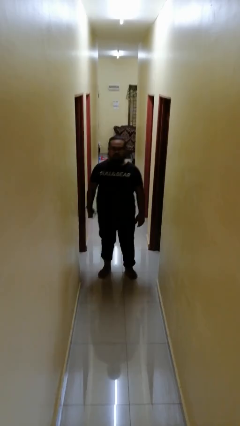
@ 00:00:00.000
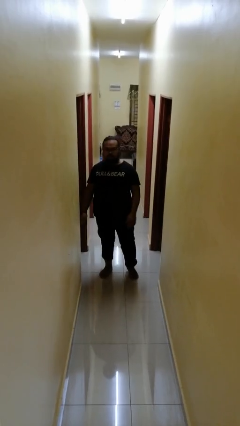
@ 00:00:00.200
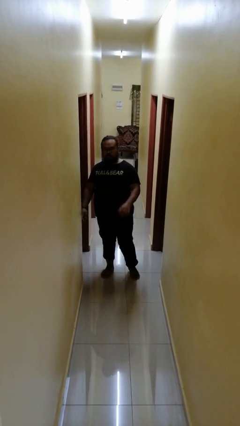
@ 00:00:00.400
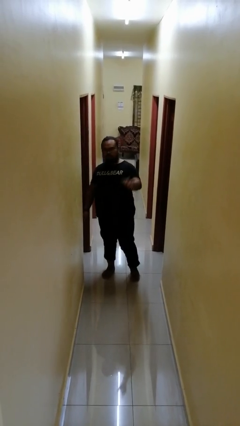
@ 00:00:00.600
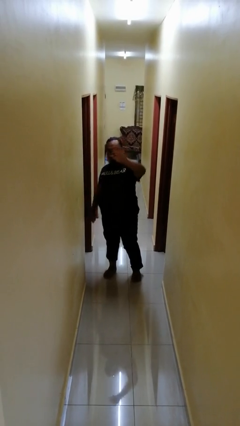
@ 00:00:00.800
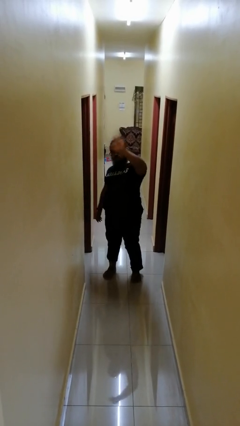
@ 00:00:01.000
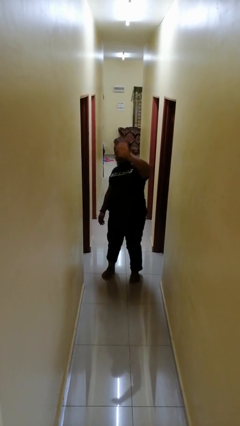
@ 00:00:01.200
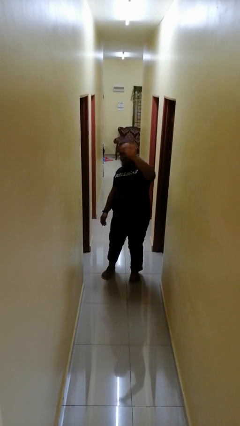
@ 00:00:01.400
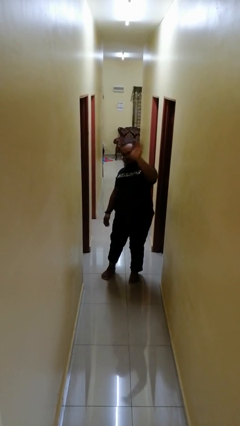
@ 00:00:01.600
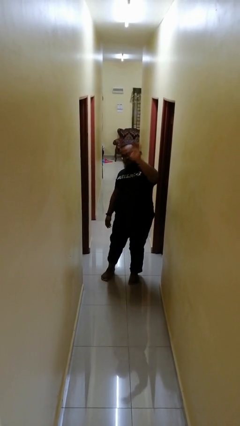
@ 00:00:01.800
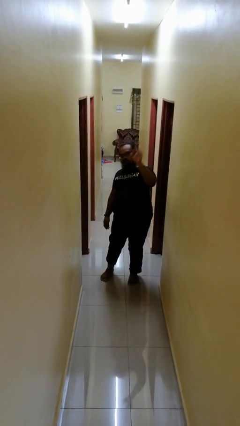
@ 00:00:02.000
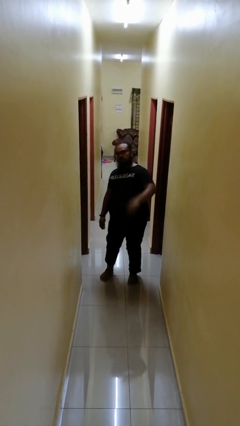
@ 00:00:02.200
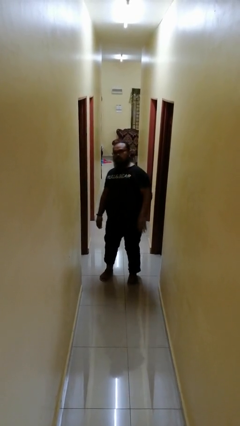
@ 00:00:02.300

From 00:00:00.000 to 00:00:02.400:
person waves at person

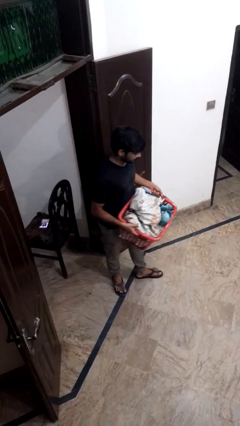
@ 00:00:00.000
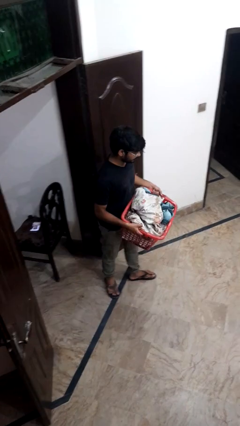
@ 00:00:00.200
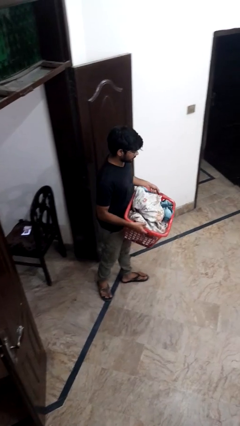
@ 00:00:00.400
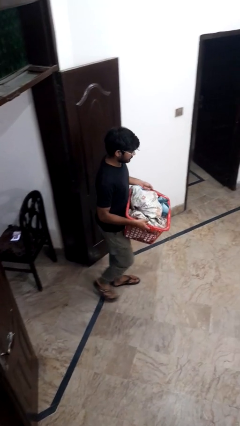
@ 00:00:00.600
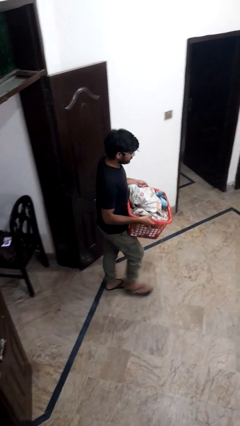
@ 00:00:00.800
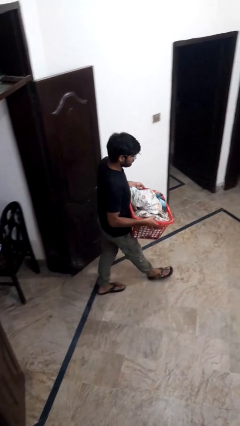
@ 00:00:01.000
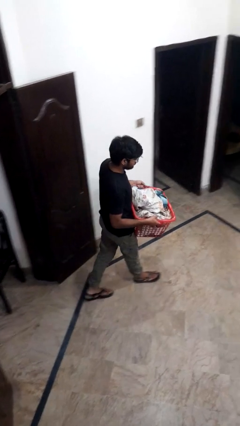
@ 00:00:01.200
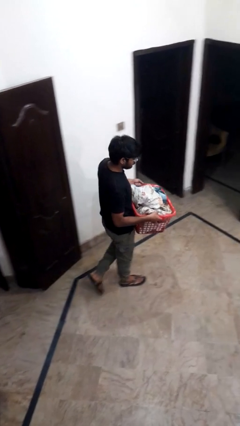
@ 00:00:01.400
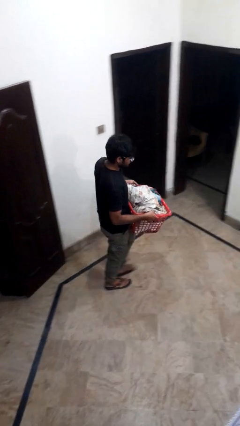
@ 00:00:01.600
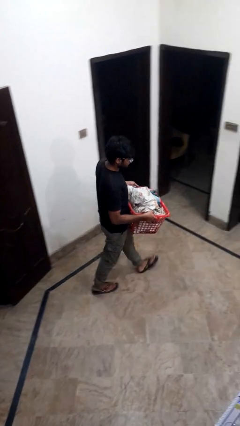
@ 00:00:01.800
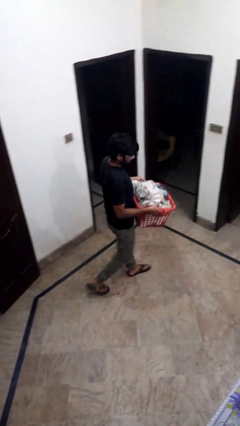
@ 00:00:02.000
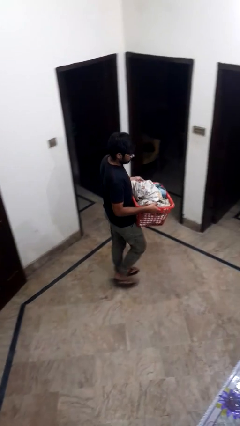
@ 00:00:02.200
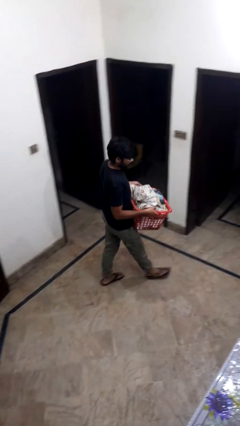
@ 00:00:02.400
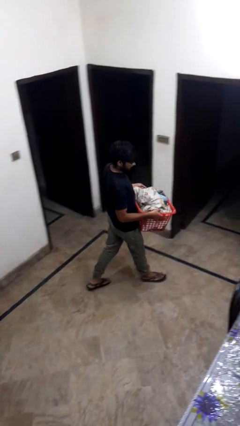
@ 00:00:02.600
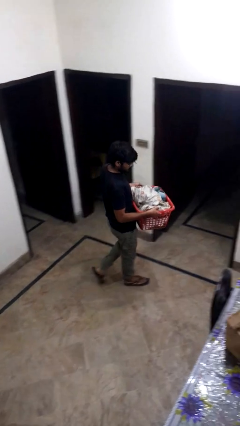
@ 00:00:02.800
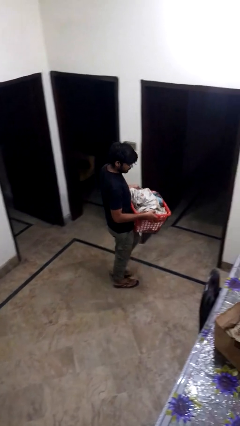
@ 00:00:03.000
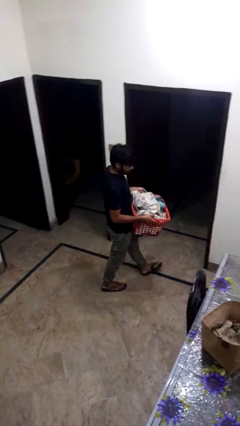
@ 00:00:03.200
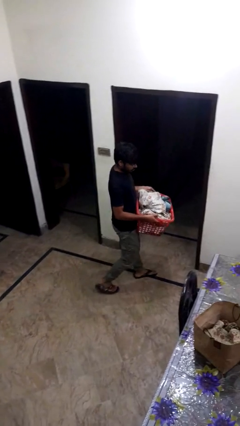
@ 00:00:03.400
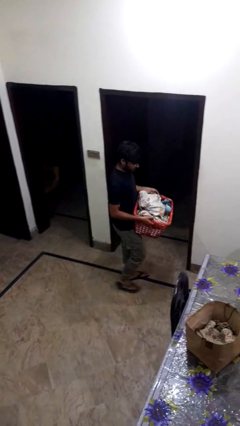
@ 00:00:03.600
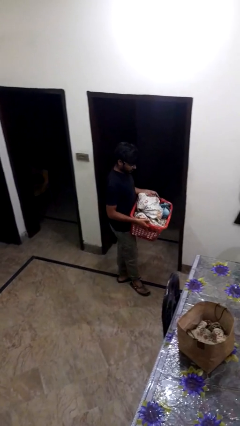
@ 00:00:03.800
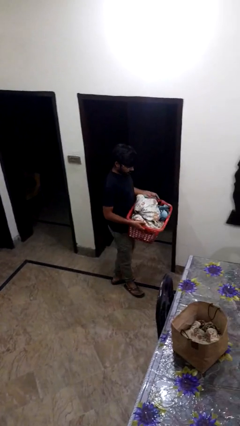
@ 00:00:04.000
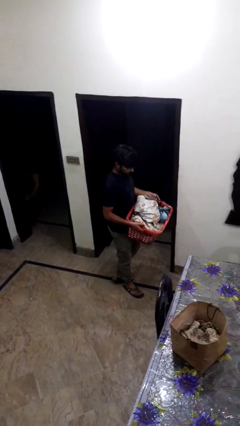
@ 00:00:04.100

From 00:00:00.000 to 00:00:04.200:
person carries laundry basket

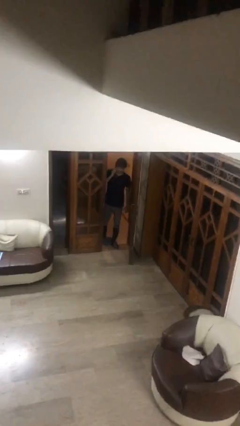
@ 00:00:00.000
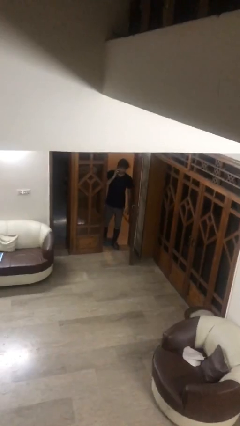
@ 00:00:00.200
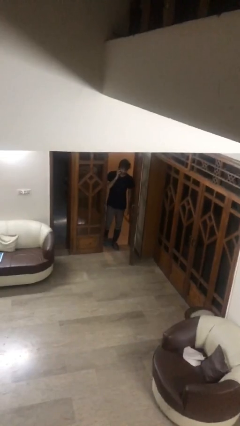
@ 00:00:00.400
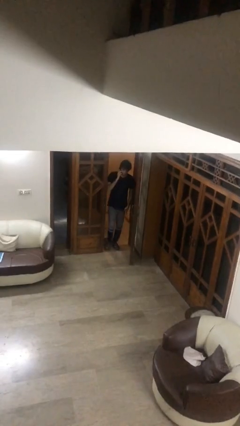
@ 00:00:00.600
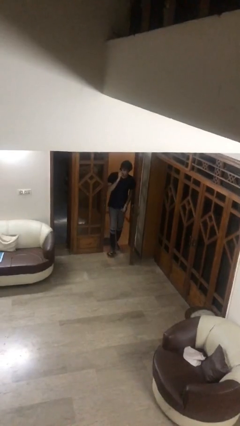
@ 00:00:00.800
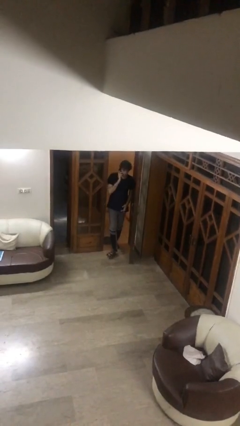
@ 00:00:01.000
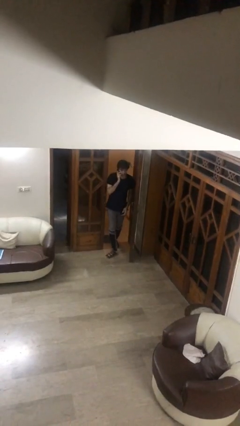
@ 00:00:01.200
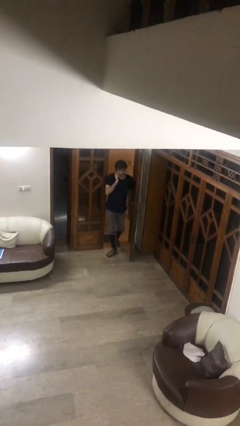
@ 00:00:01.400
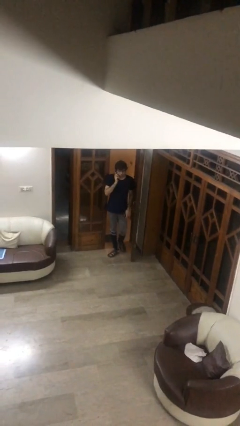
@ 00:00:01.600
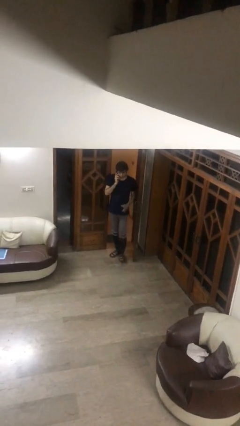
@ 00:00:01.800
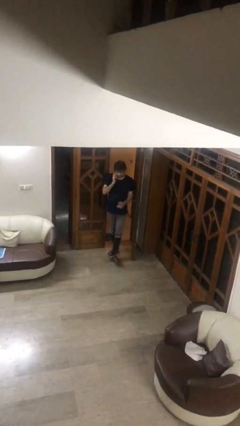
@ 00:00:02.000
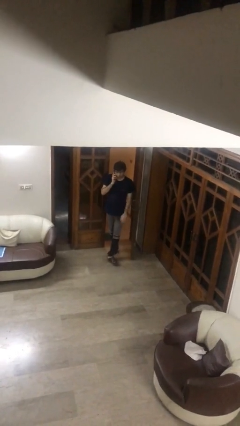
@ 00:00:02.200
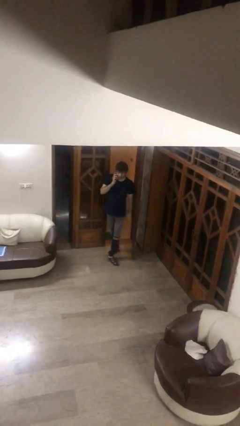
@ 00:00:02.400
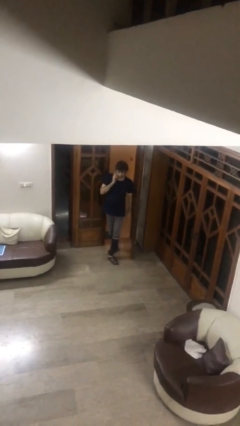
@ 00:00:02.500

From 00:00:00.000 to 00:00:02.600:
person enters scene through structure

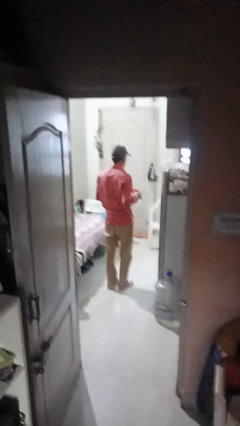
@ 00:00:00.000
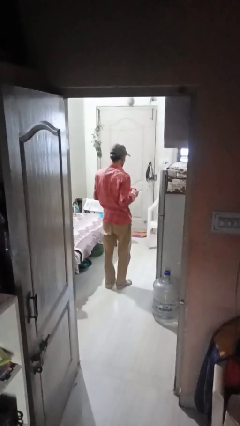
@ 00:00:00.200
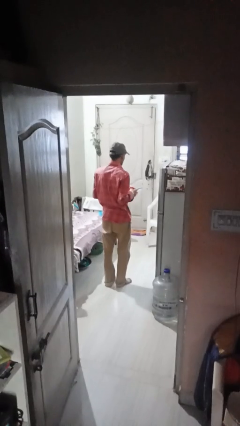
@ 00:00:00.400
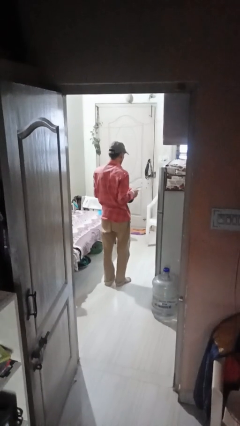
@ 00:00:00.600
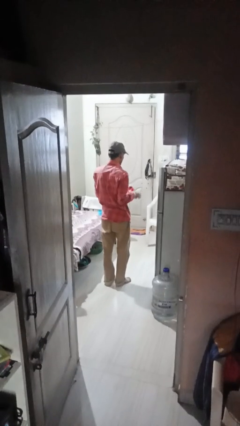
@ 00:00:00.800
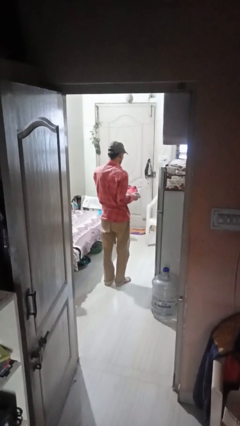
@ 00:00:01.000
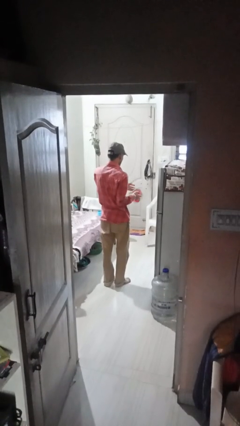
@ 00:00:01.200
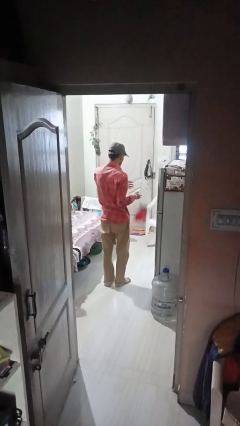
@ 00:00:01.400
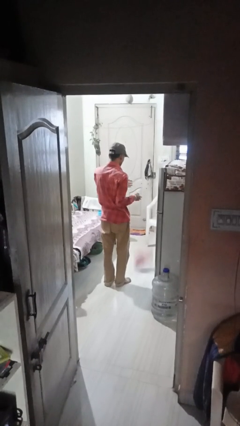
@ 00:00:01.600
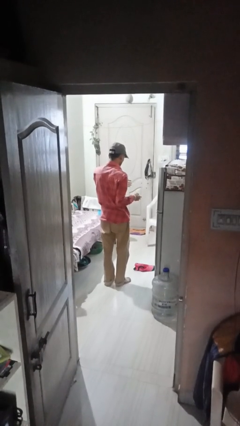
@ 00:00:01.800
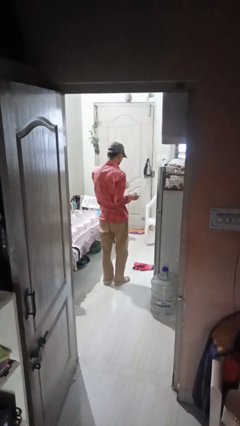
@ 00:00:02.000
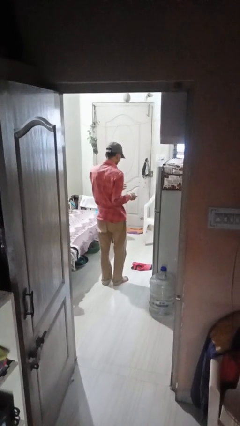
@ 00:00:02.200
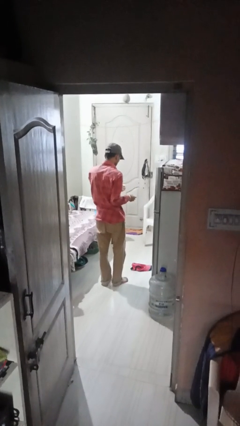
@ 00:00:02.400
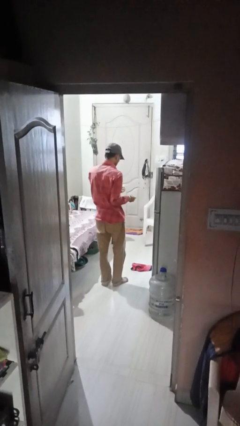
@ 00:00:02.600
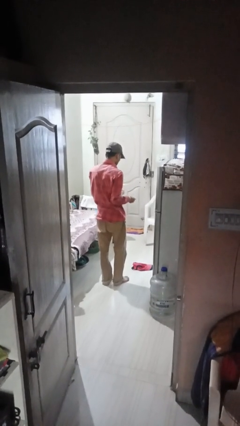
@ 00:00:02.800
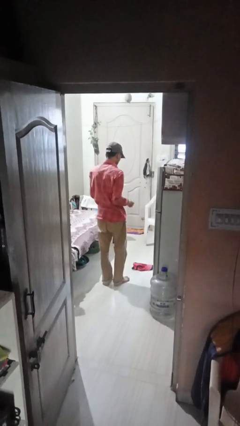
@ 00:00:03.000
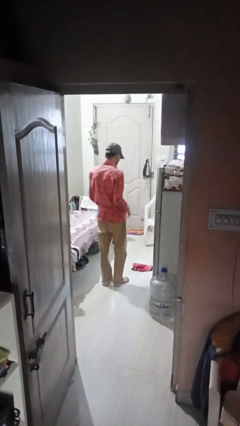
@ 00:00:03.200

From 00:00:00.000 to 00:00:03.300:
person drops object

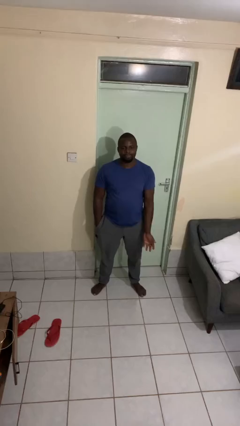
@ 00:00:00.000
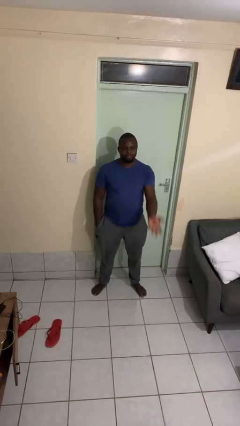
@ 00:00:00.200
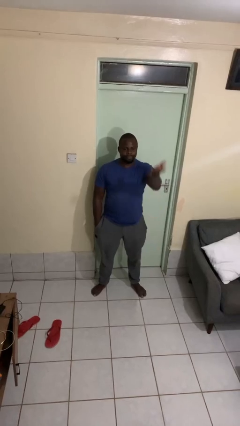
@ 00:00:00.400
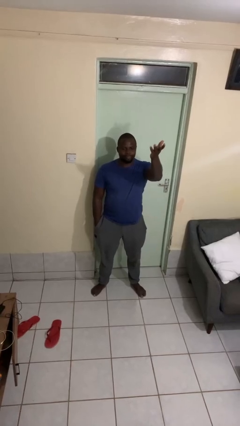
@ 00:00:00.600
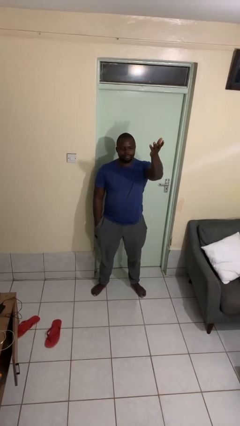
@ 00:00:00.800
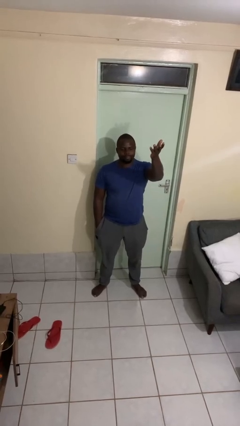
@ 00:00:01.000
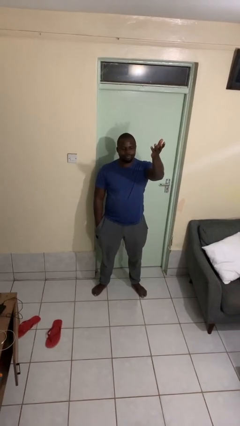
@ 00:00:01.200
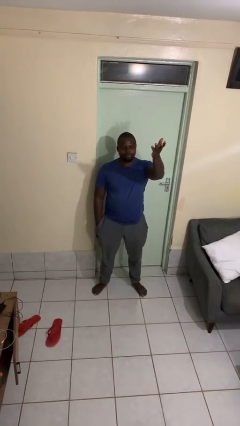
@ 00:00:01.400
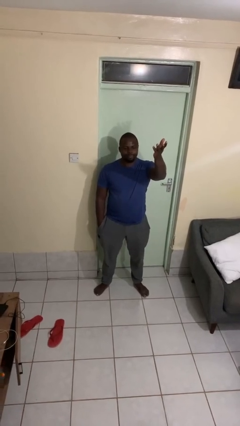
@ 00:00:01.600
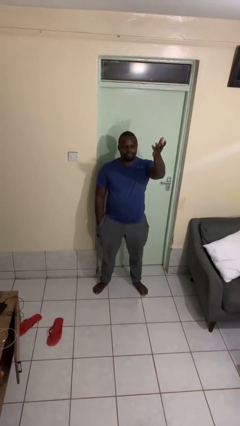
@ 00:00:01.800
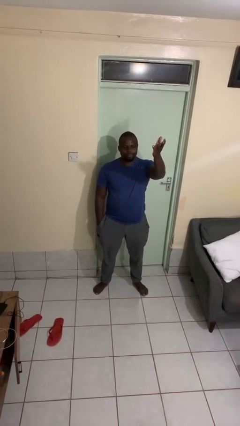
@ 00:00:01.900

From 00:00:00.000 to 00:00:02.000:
person gestures swipe up

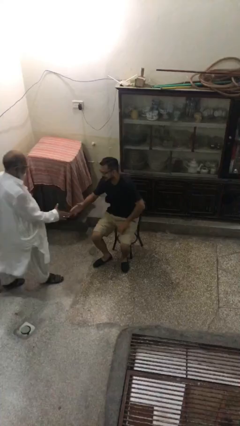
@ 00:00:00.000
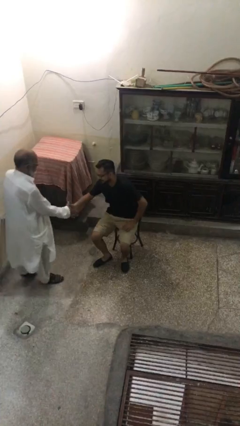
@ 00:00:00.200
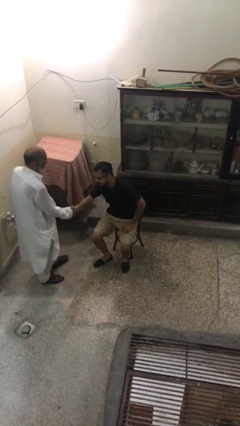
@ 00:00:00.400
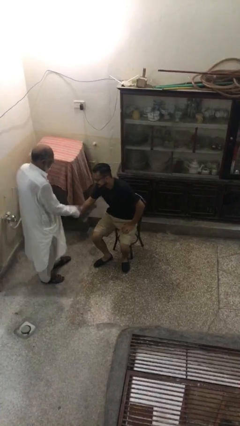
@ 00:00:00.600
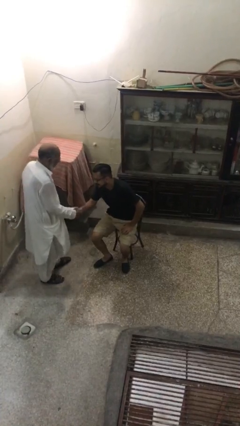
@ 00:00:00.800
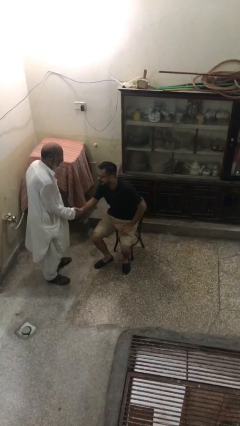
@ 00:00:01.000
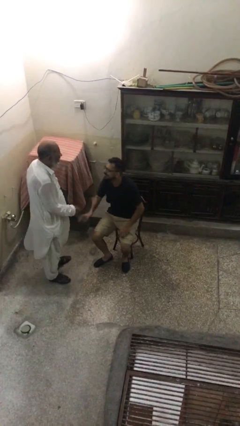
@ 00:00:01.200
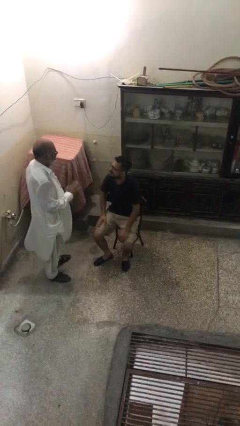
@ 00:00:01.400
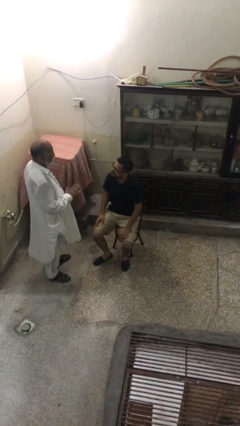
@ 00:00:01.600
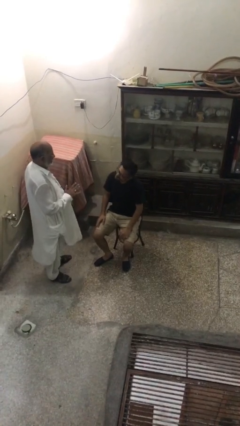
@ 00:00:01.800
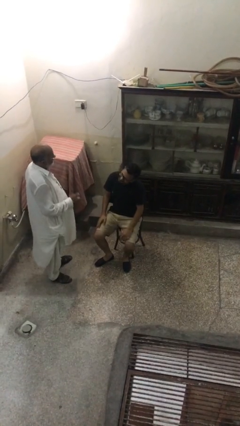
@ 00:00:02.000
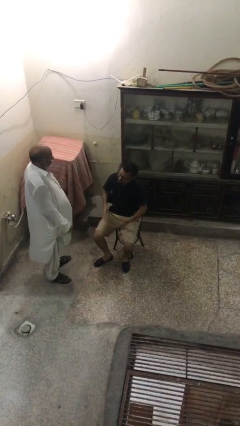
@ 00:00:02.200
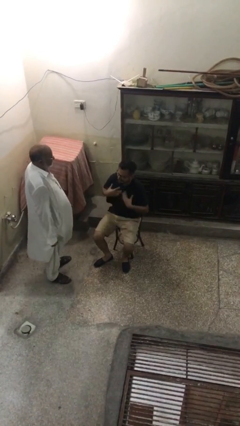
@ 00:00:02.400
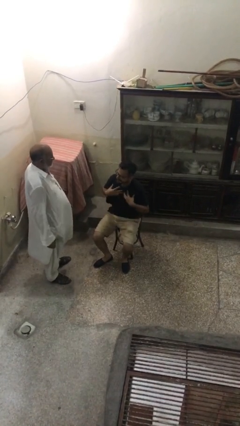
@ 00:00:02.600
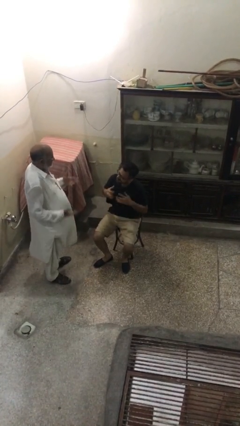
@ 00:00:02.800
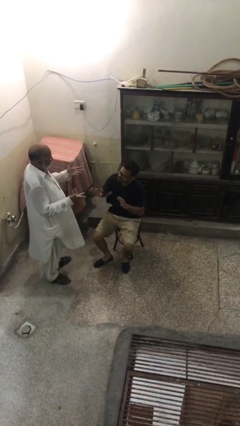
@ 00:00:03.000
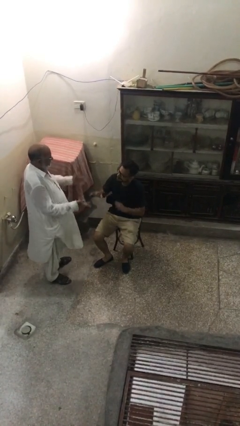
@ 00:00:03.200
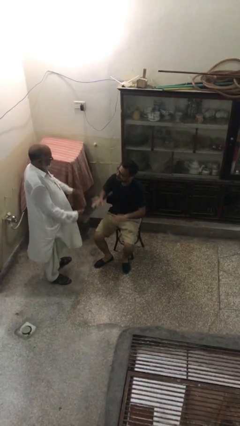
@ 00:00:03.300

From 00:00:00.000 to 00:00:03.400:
person shakes hand
